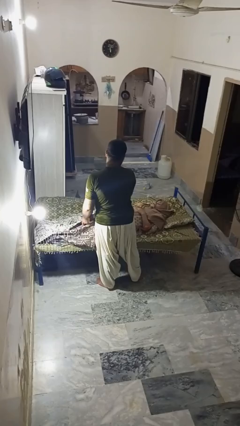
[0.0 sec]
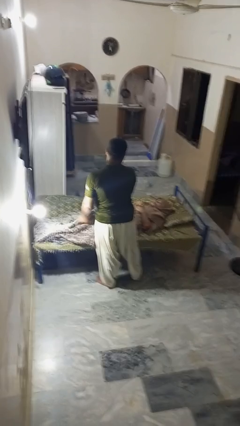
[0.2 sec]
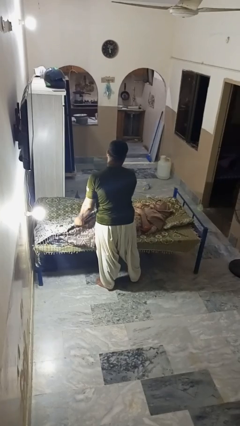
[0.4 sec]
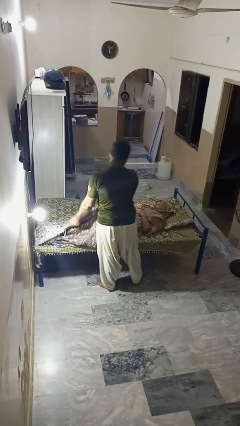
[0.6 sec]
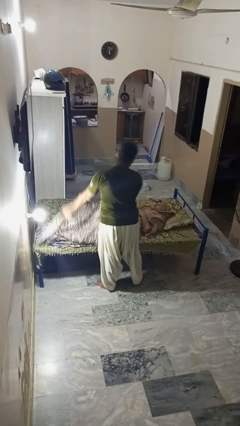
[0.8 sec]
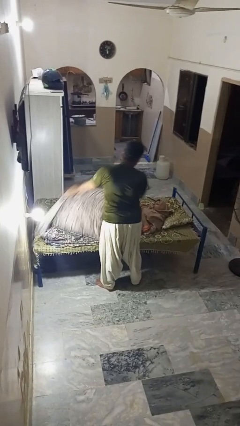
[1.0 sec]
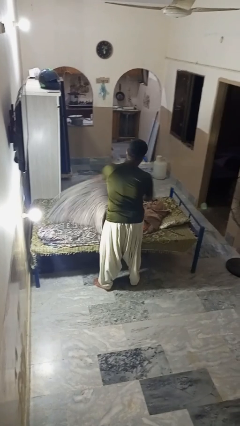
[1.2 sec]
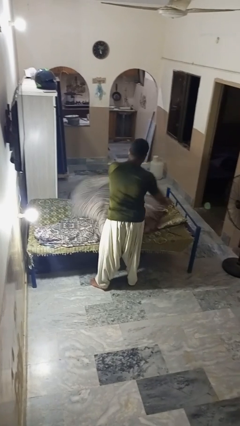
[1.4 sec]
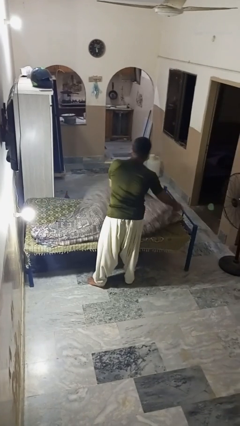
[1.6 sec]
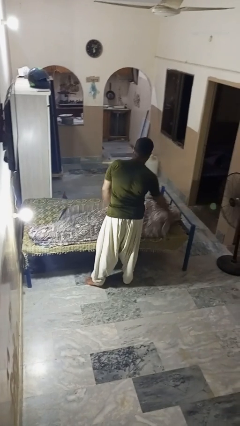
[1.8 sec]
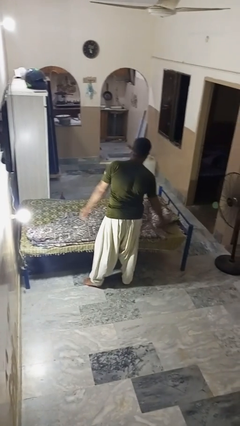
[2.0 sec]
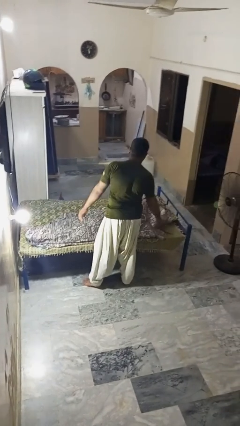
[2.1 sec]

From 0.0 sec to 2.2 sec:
person covers friend with blanket

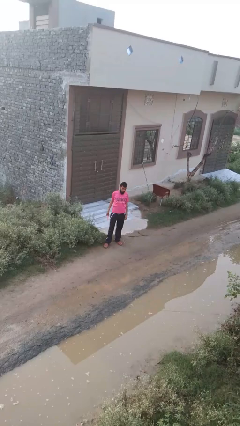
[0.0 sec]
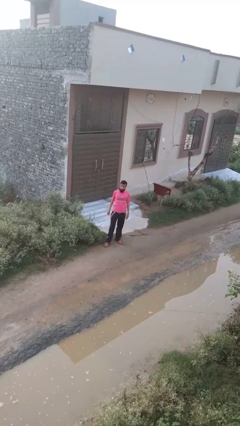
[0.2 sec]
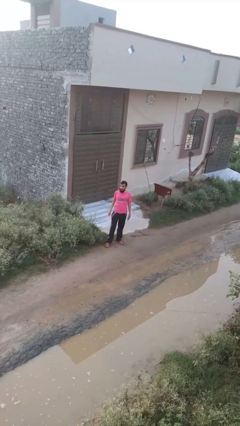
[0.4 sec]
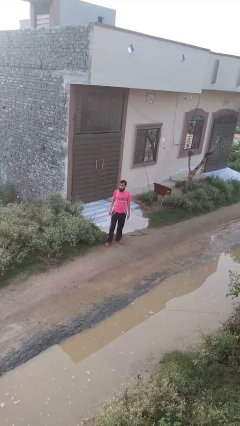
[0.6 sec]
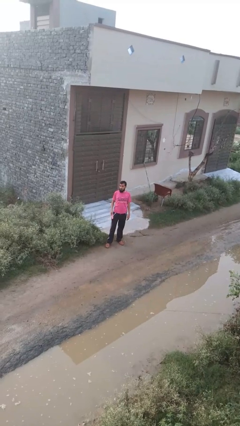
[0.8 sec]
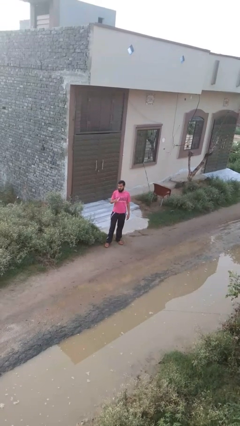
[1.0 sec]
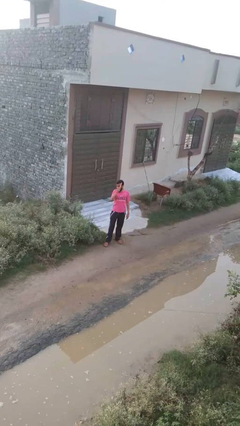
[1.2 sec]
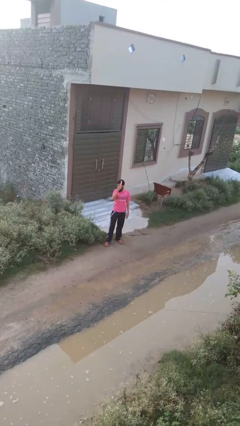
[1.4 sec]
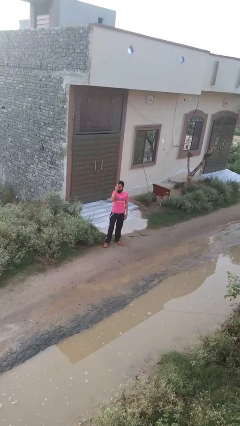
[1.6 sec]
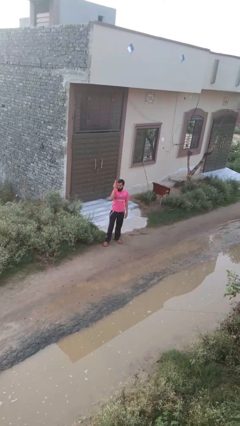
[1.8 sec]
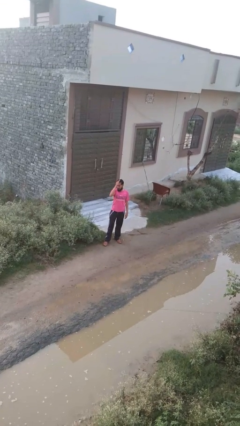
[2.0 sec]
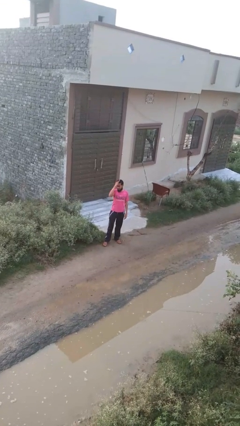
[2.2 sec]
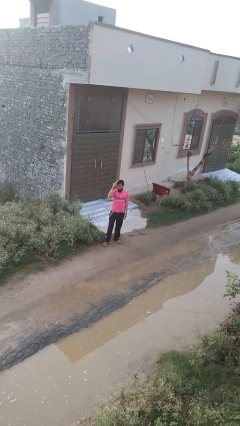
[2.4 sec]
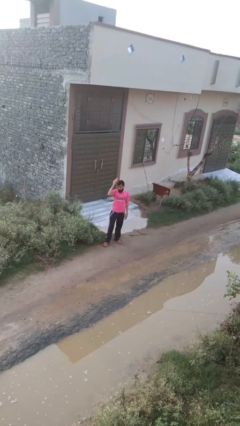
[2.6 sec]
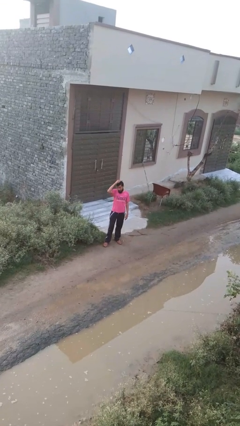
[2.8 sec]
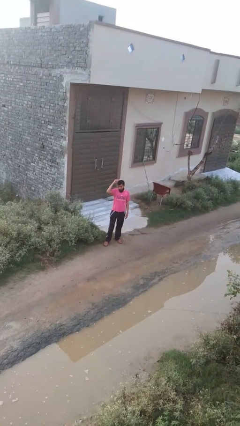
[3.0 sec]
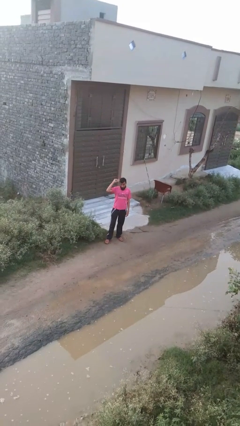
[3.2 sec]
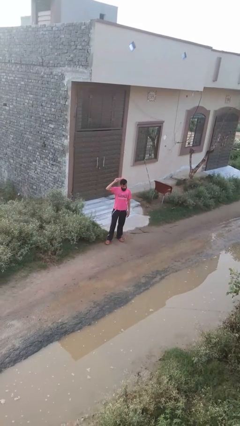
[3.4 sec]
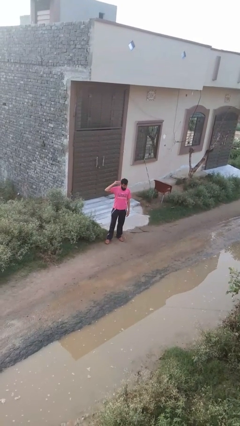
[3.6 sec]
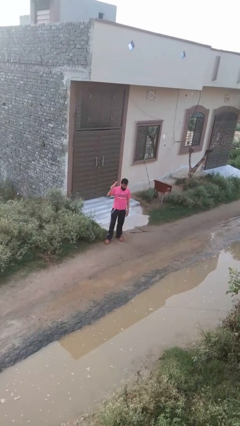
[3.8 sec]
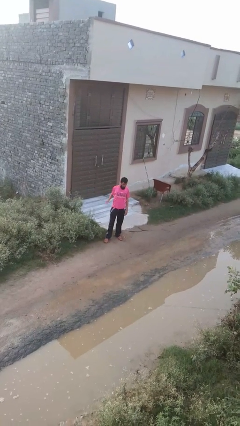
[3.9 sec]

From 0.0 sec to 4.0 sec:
person brushes hair

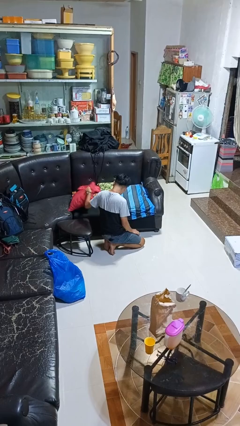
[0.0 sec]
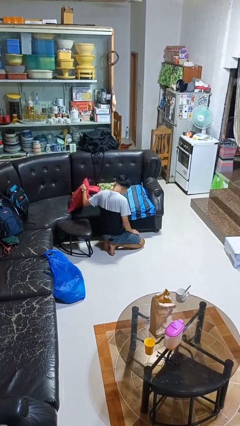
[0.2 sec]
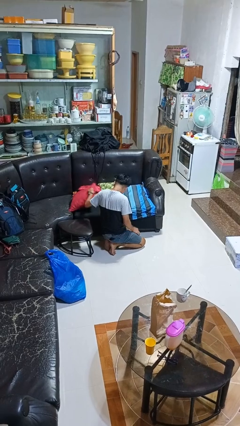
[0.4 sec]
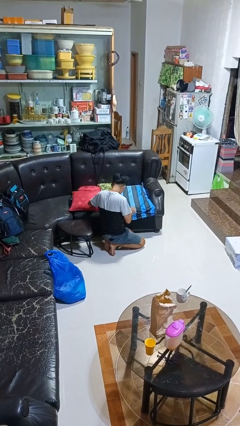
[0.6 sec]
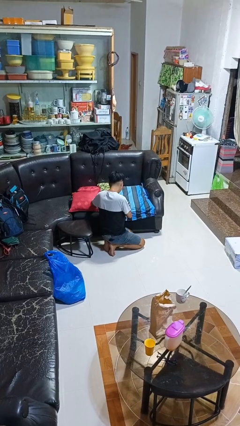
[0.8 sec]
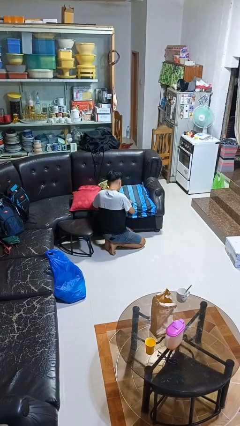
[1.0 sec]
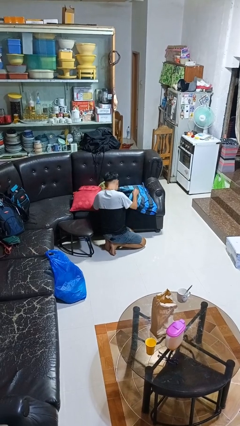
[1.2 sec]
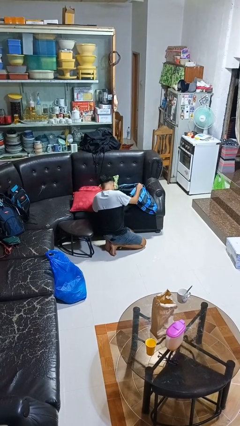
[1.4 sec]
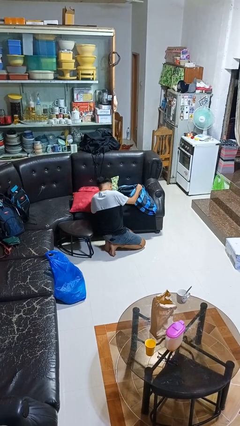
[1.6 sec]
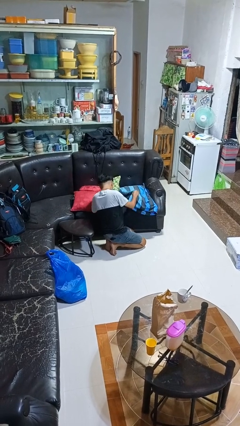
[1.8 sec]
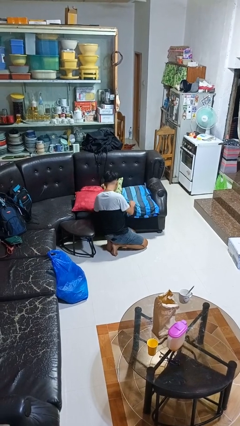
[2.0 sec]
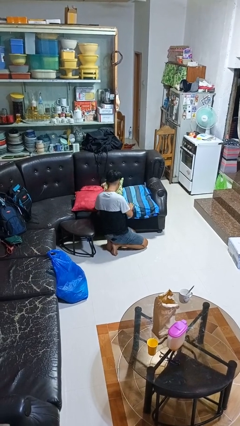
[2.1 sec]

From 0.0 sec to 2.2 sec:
person searches in couch

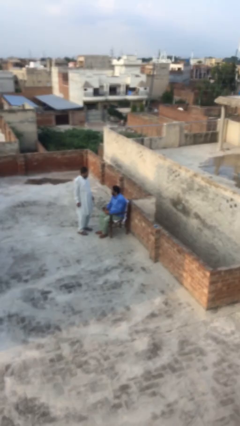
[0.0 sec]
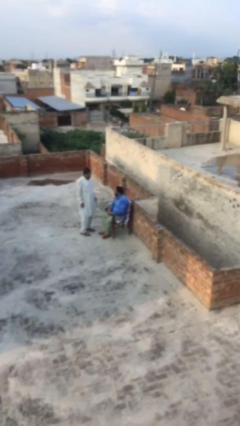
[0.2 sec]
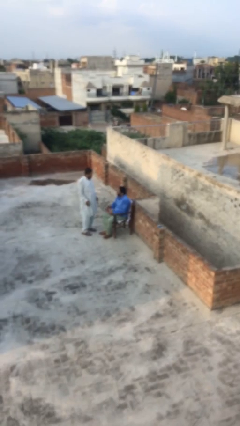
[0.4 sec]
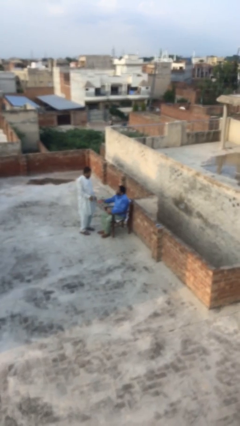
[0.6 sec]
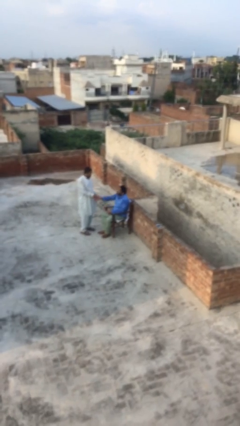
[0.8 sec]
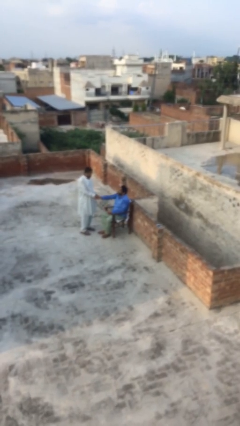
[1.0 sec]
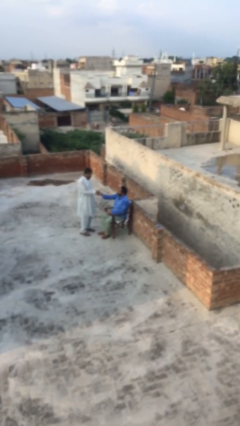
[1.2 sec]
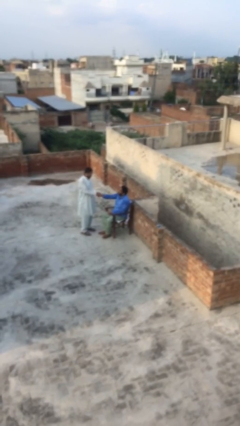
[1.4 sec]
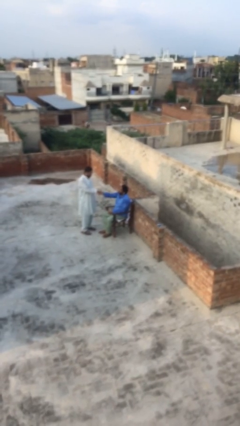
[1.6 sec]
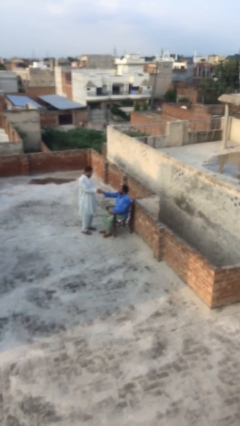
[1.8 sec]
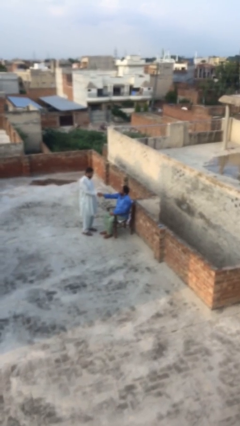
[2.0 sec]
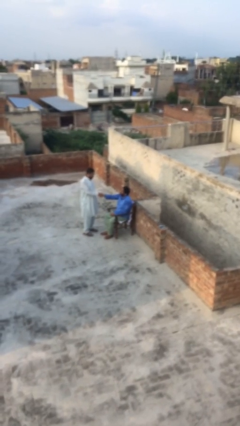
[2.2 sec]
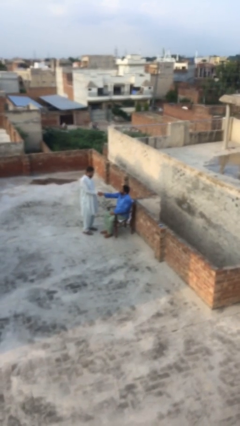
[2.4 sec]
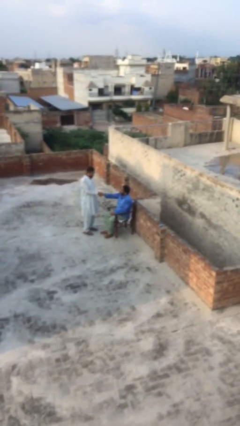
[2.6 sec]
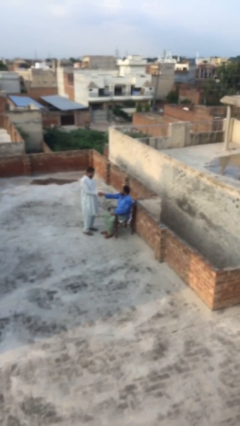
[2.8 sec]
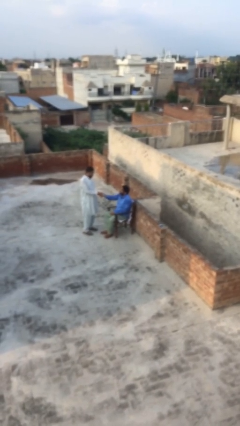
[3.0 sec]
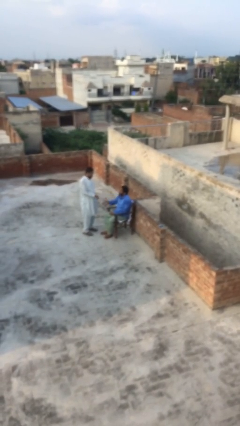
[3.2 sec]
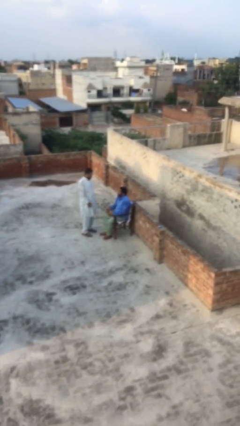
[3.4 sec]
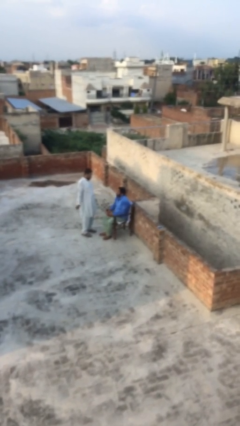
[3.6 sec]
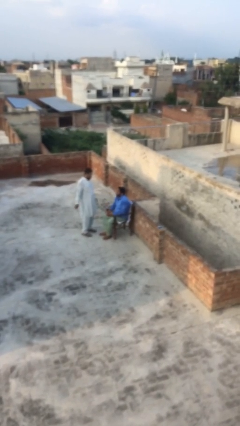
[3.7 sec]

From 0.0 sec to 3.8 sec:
person shakes hand

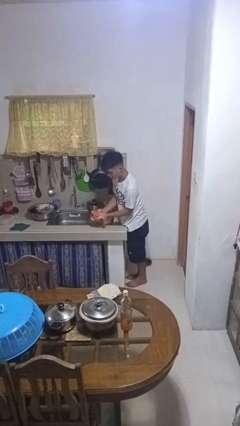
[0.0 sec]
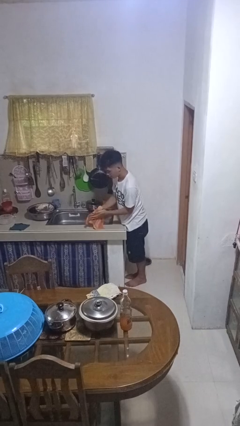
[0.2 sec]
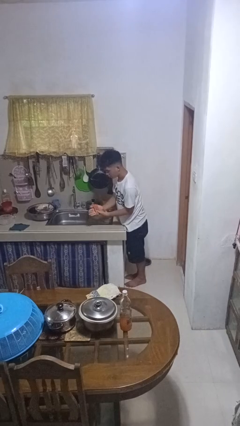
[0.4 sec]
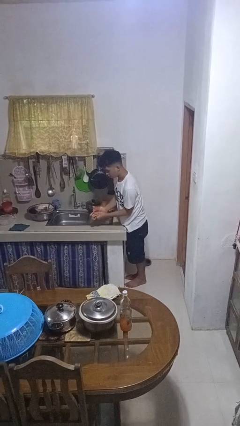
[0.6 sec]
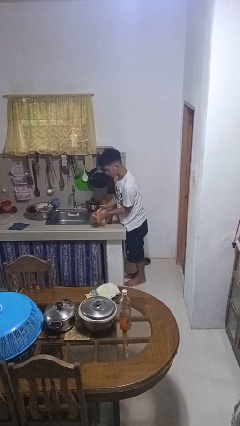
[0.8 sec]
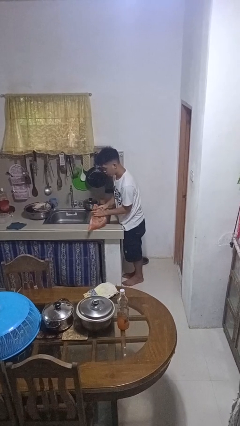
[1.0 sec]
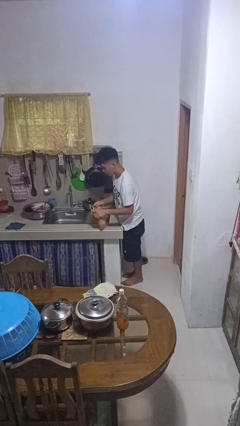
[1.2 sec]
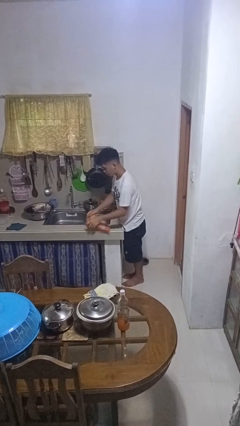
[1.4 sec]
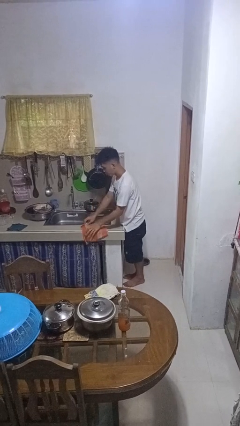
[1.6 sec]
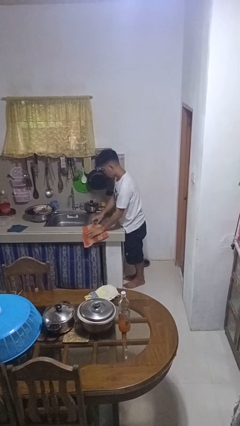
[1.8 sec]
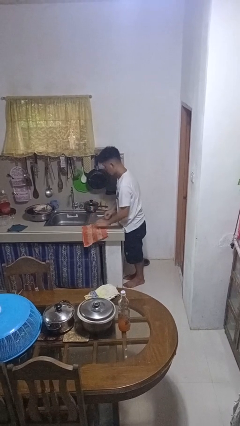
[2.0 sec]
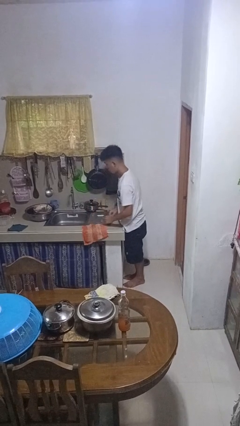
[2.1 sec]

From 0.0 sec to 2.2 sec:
person dries hands with towel

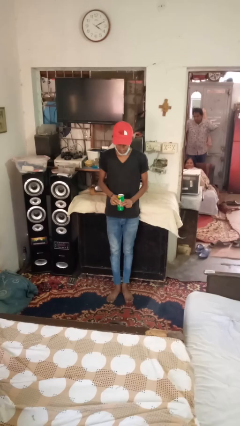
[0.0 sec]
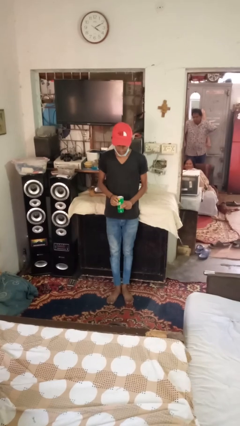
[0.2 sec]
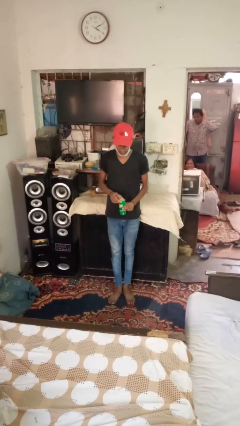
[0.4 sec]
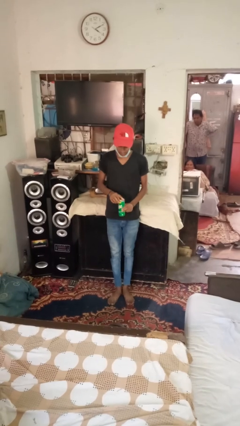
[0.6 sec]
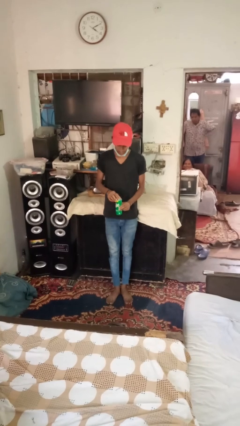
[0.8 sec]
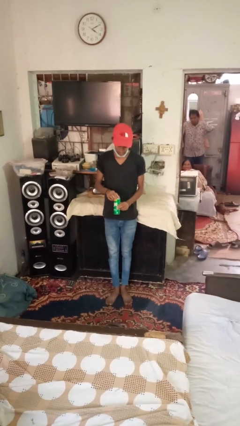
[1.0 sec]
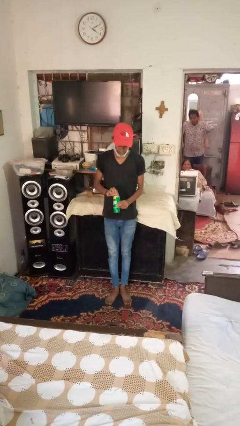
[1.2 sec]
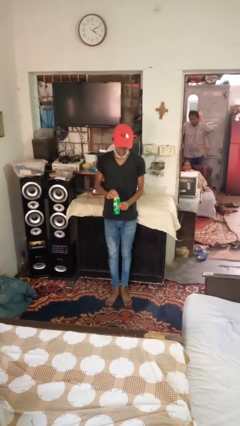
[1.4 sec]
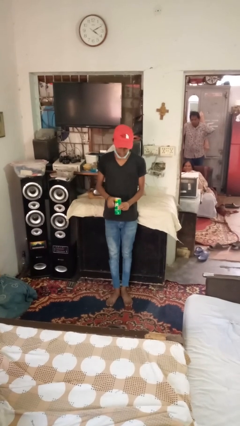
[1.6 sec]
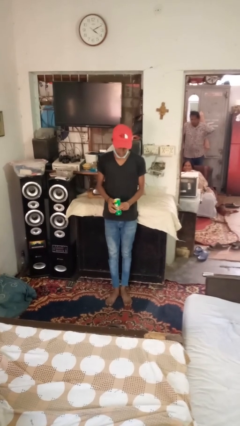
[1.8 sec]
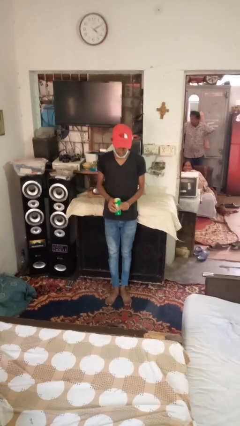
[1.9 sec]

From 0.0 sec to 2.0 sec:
person opens beverage can

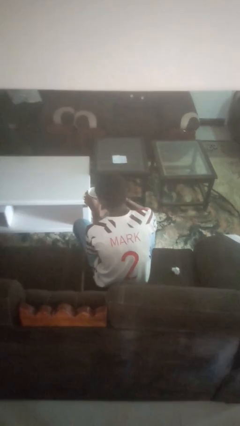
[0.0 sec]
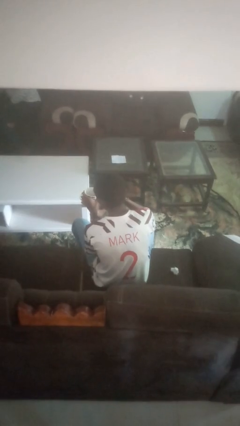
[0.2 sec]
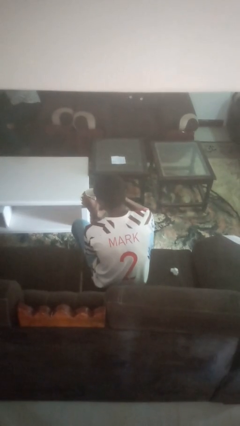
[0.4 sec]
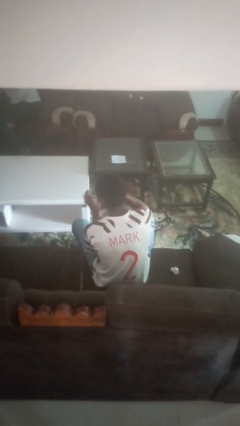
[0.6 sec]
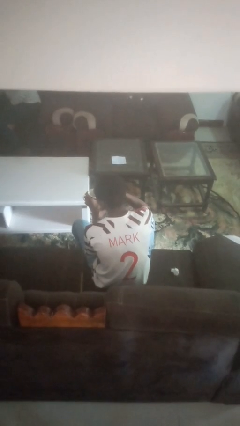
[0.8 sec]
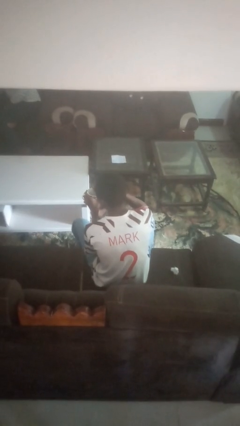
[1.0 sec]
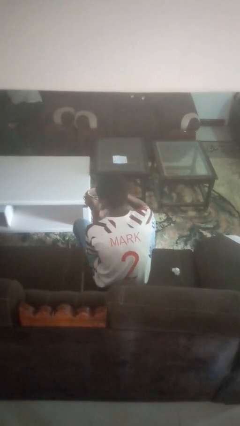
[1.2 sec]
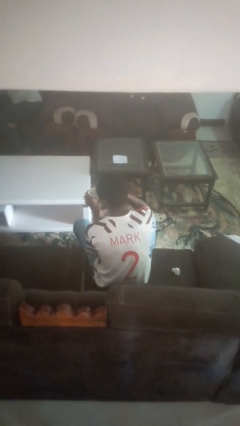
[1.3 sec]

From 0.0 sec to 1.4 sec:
person stirs mug
